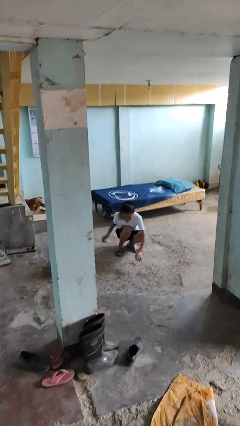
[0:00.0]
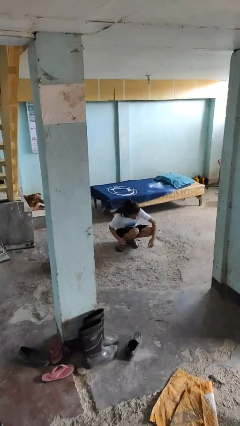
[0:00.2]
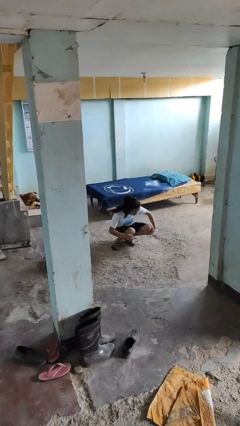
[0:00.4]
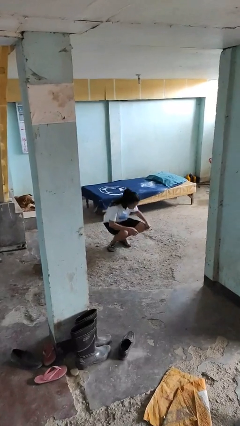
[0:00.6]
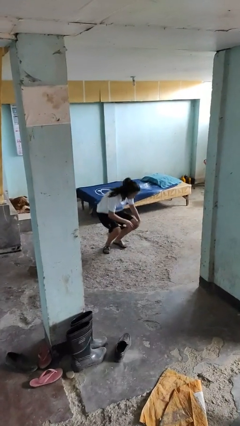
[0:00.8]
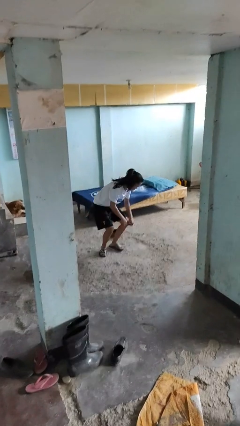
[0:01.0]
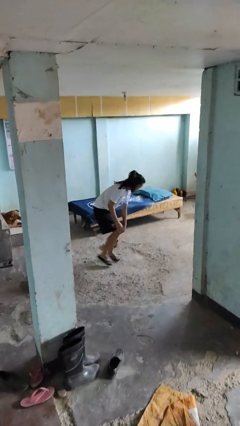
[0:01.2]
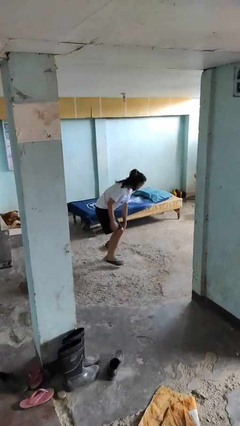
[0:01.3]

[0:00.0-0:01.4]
person lies down on floor

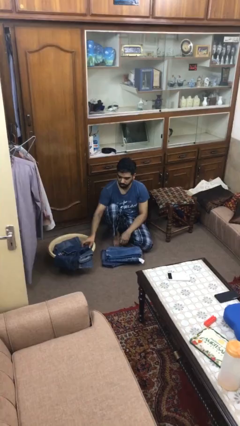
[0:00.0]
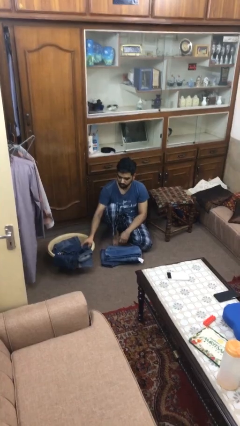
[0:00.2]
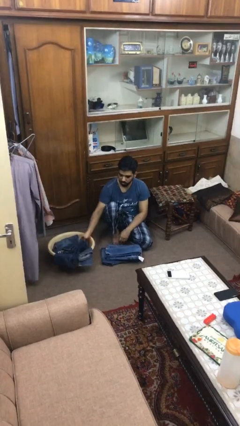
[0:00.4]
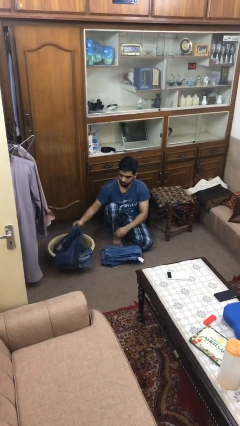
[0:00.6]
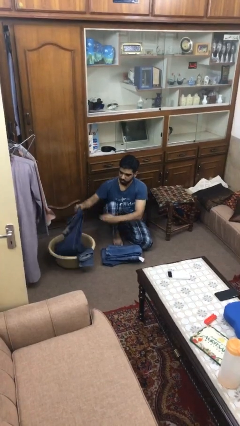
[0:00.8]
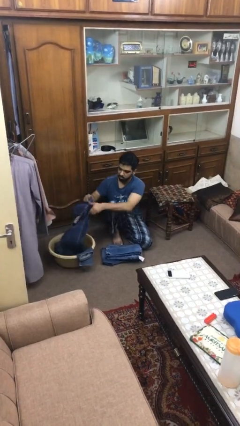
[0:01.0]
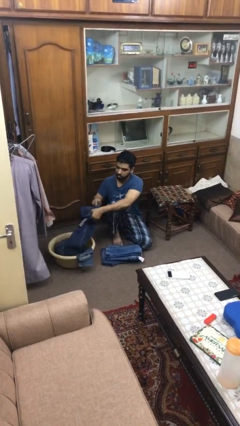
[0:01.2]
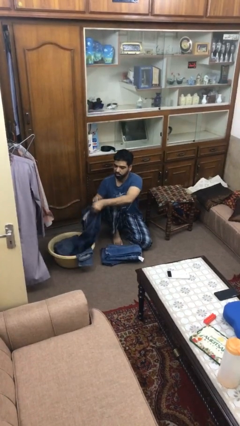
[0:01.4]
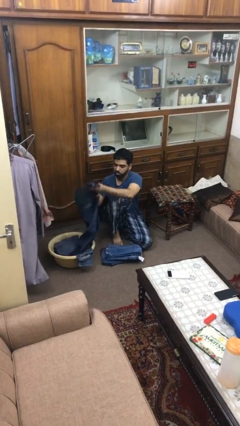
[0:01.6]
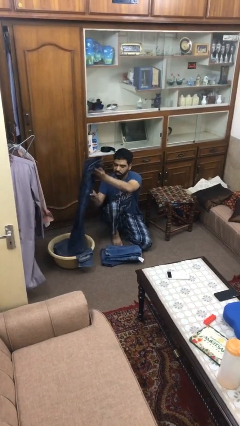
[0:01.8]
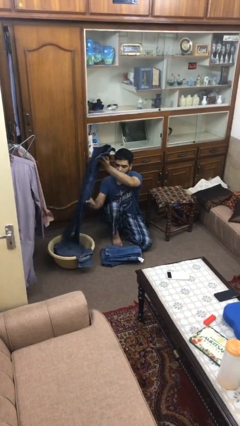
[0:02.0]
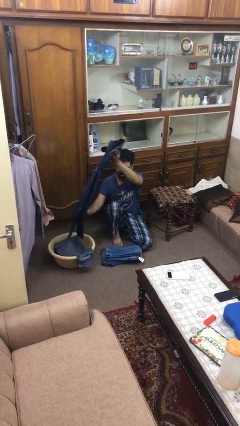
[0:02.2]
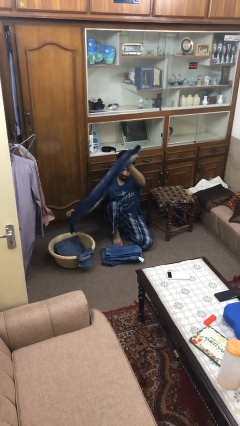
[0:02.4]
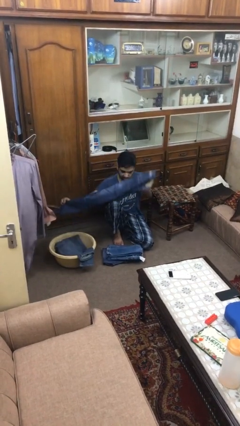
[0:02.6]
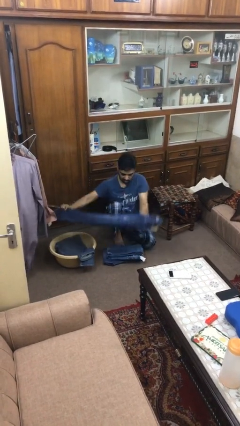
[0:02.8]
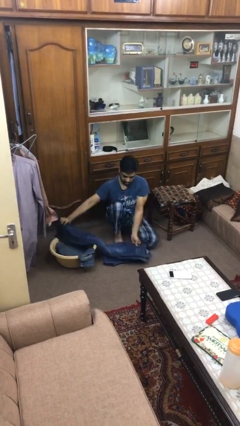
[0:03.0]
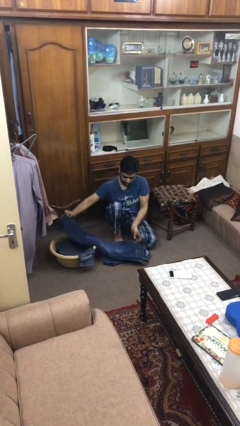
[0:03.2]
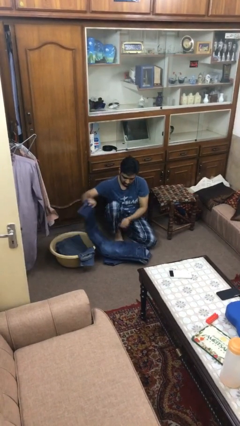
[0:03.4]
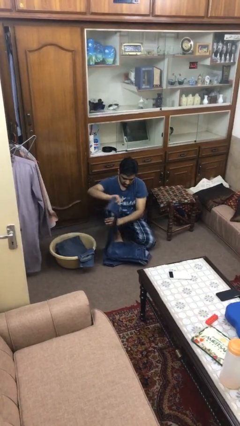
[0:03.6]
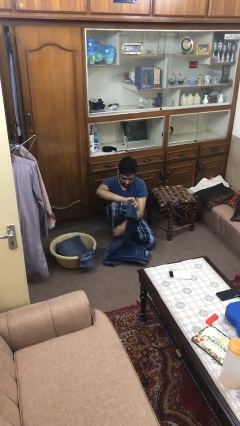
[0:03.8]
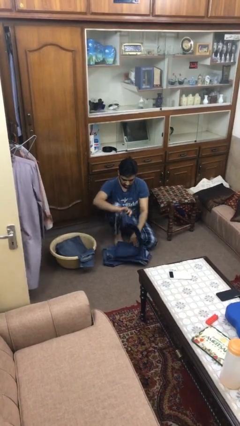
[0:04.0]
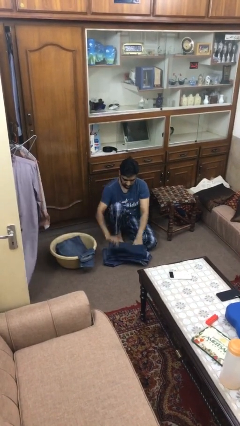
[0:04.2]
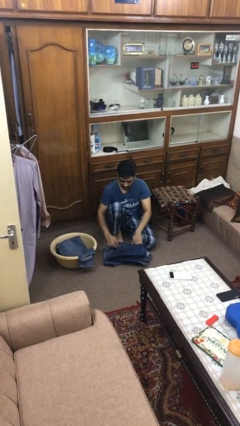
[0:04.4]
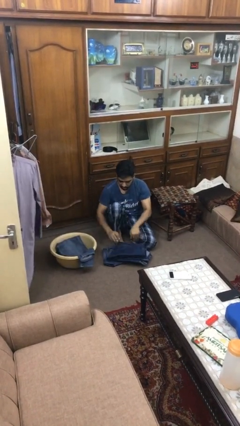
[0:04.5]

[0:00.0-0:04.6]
person folds pants

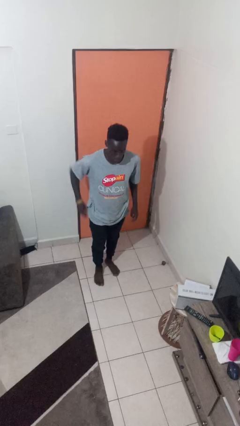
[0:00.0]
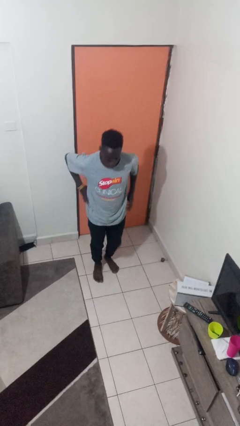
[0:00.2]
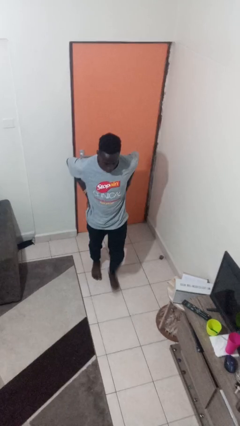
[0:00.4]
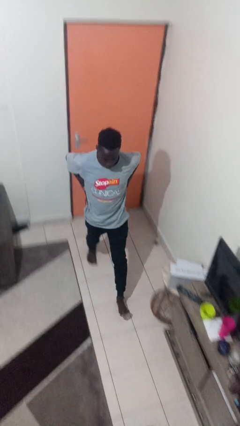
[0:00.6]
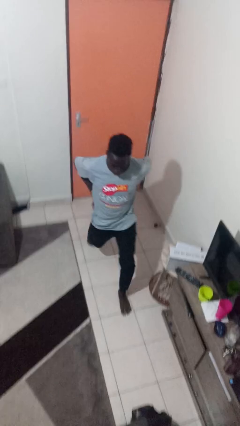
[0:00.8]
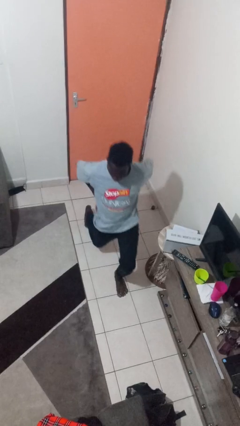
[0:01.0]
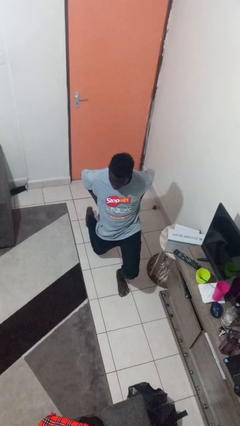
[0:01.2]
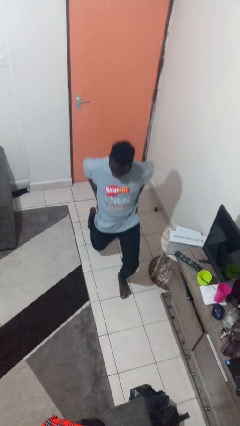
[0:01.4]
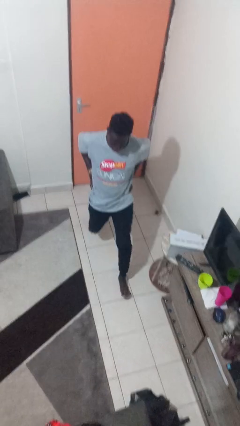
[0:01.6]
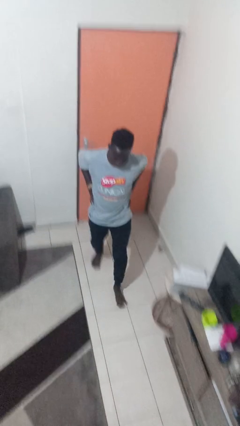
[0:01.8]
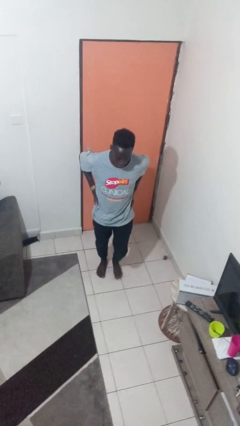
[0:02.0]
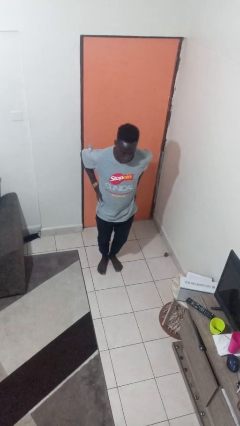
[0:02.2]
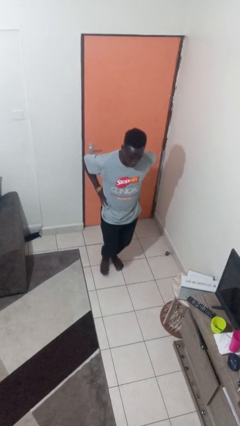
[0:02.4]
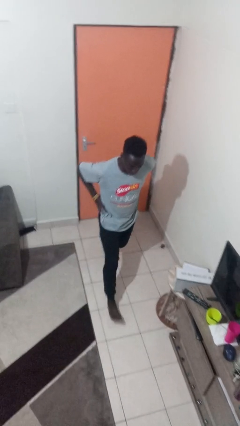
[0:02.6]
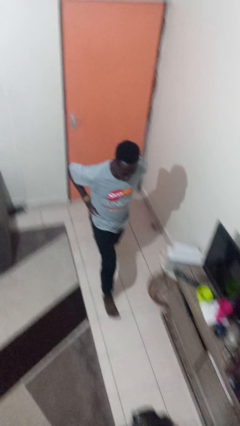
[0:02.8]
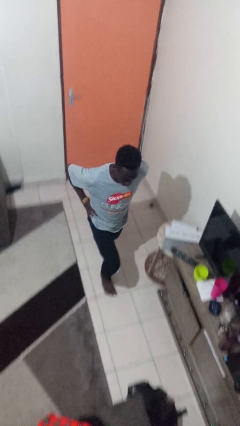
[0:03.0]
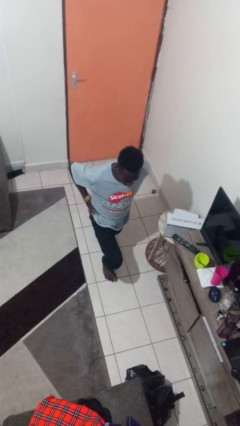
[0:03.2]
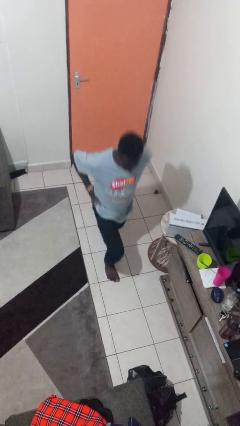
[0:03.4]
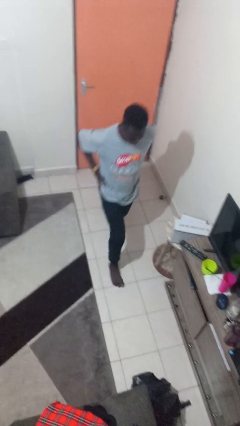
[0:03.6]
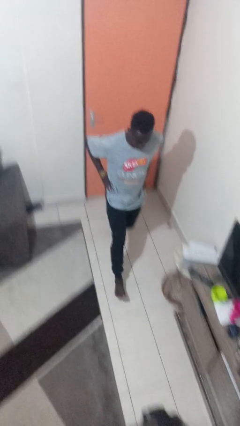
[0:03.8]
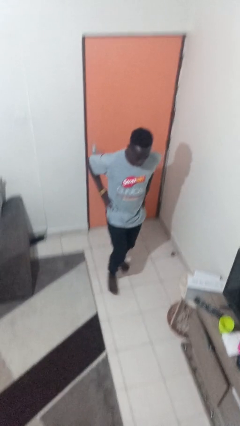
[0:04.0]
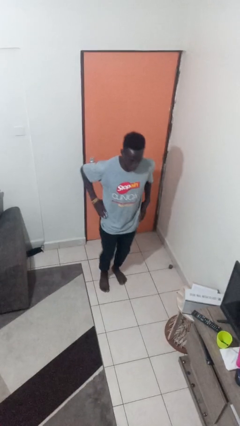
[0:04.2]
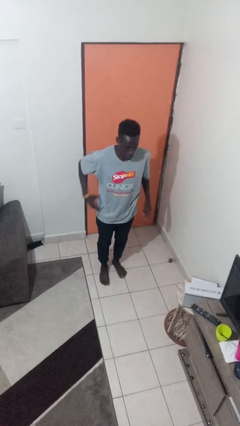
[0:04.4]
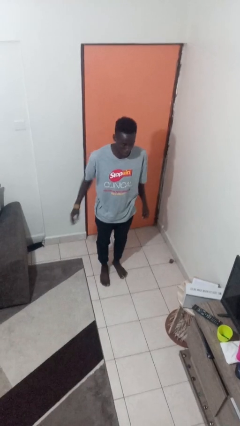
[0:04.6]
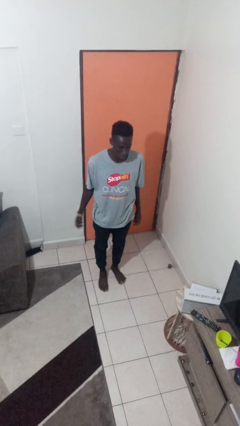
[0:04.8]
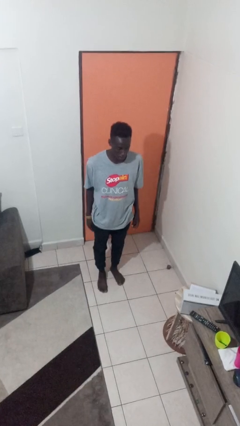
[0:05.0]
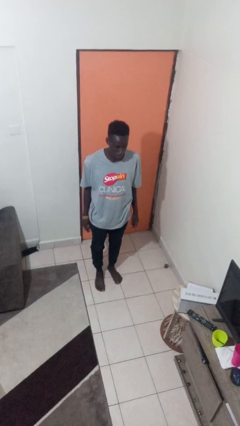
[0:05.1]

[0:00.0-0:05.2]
person exercises with lunges

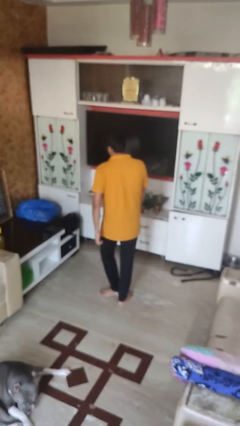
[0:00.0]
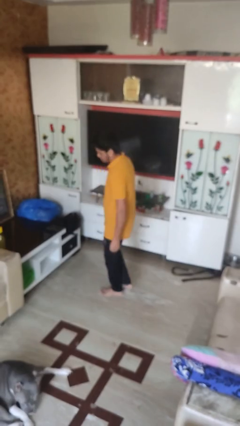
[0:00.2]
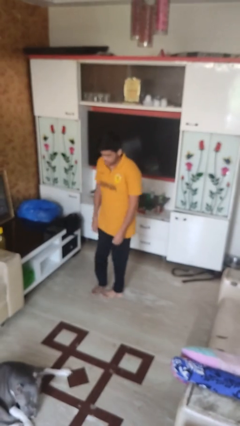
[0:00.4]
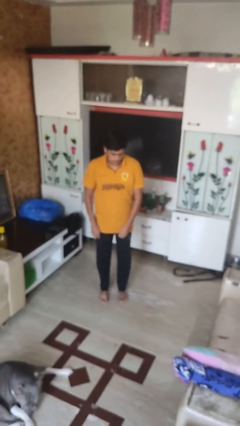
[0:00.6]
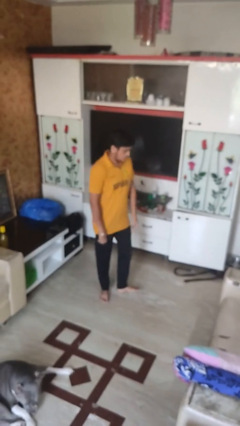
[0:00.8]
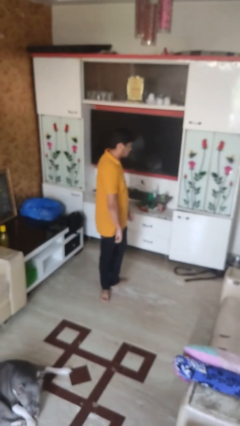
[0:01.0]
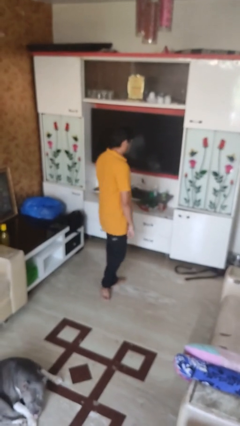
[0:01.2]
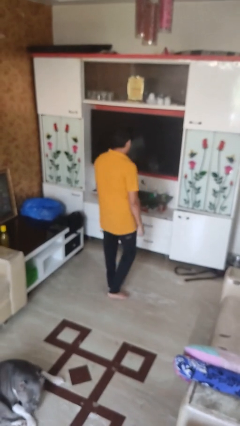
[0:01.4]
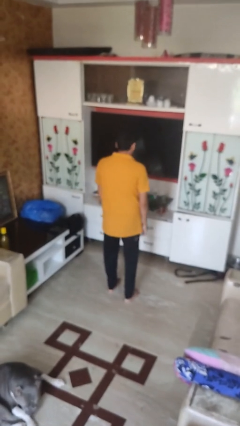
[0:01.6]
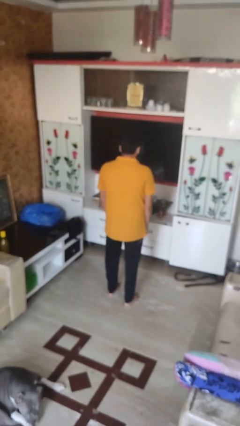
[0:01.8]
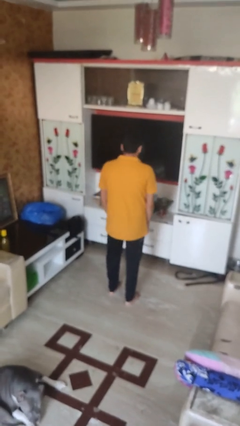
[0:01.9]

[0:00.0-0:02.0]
person twirls

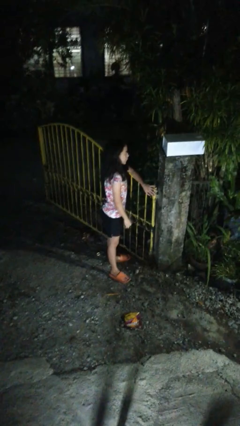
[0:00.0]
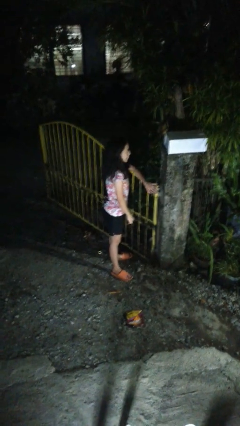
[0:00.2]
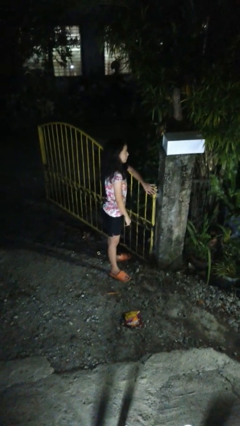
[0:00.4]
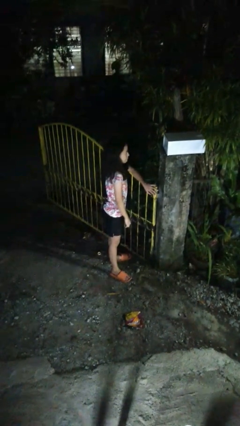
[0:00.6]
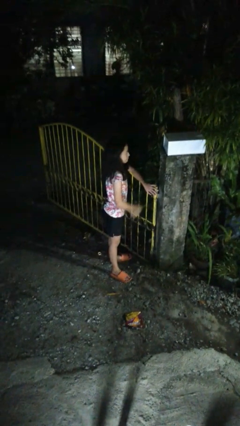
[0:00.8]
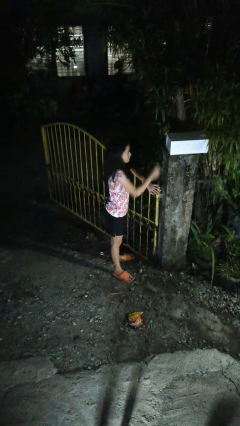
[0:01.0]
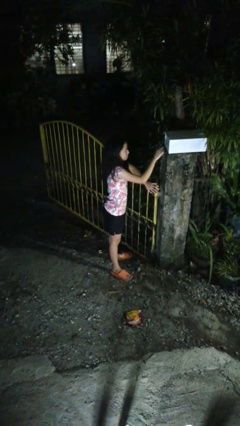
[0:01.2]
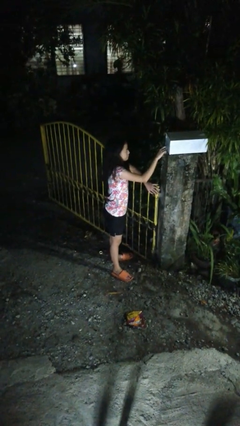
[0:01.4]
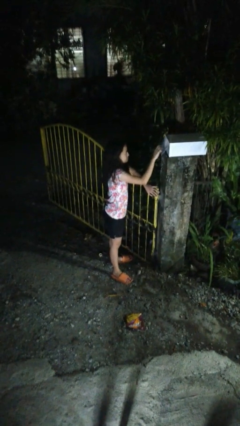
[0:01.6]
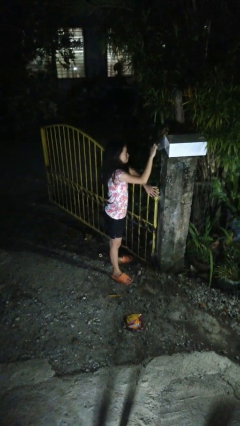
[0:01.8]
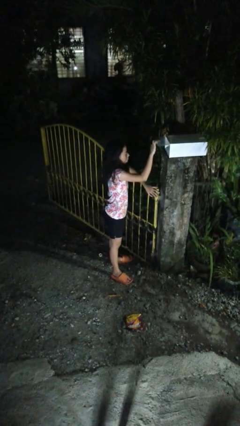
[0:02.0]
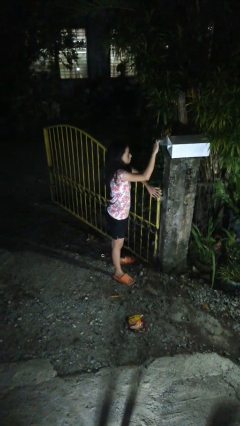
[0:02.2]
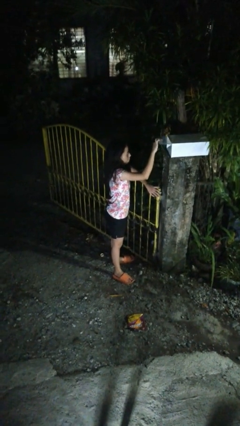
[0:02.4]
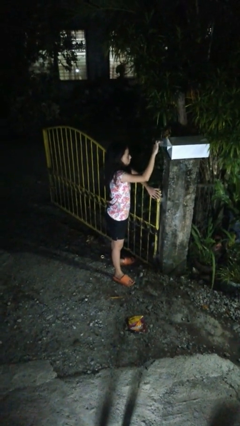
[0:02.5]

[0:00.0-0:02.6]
person opens mailbox

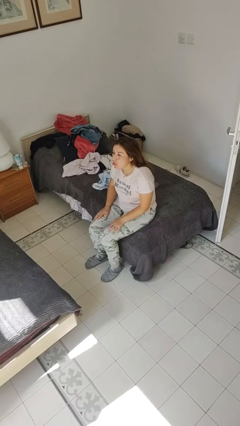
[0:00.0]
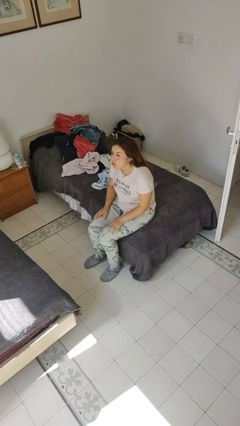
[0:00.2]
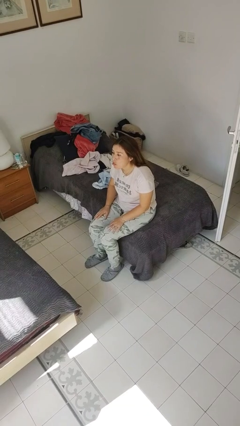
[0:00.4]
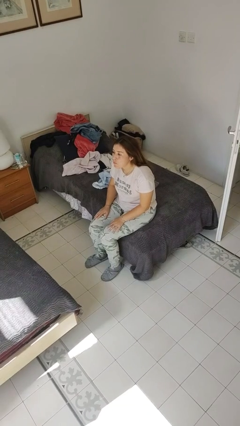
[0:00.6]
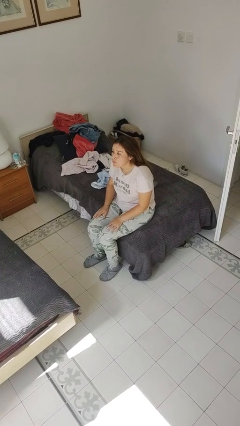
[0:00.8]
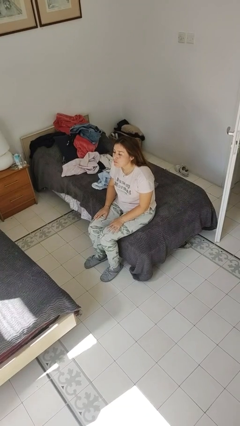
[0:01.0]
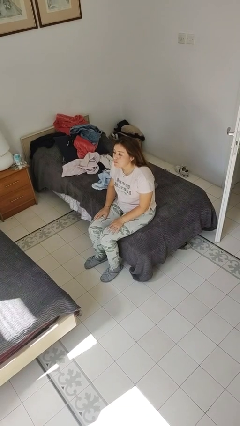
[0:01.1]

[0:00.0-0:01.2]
person sticks out tongue
